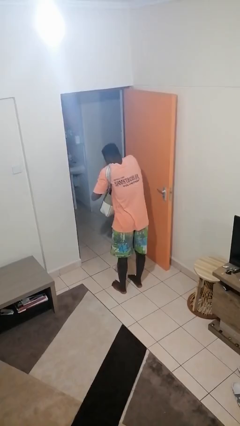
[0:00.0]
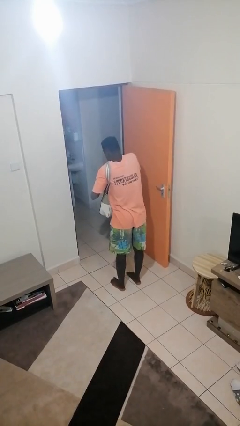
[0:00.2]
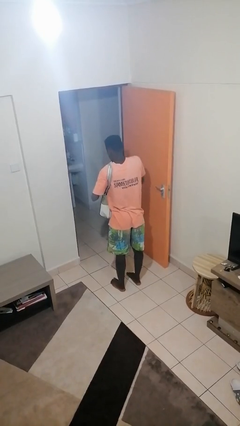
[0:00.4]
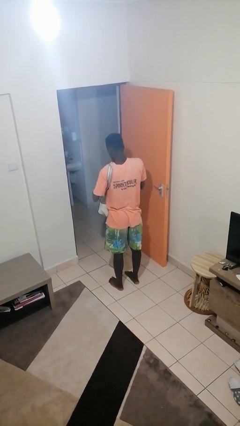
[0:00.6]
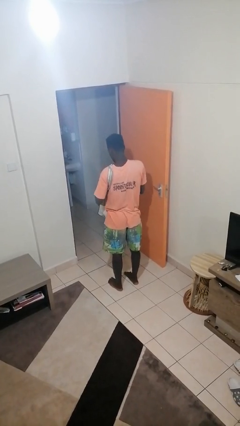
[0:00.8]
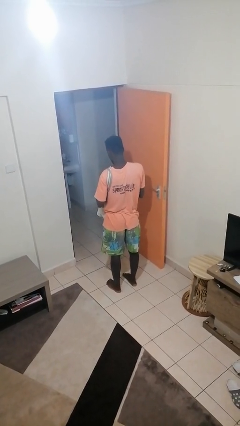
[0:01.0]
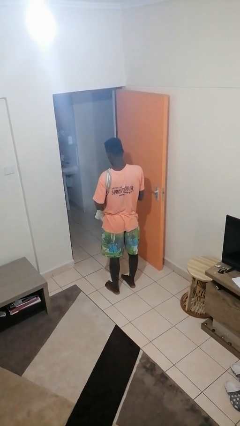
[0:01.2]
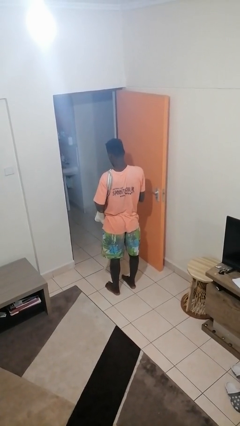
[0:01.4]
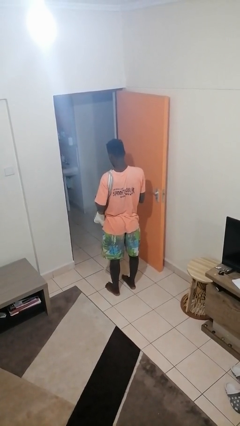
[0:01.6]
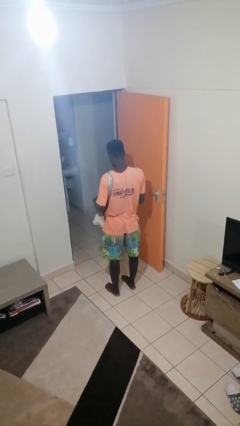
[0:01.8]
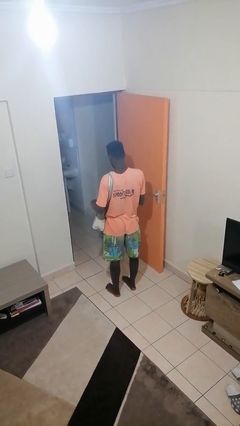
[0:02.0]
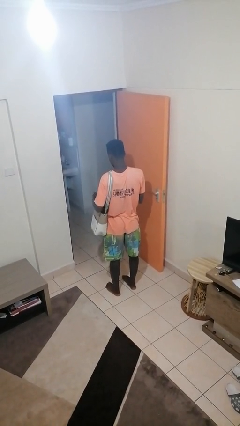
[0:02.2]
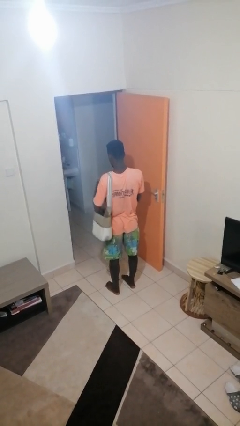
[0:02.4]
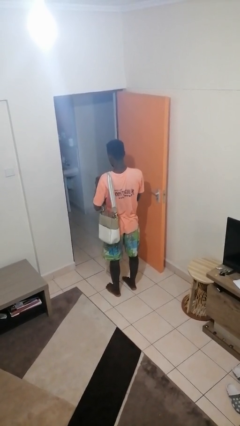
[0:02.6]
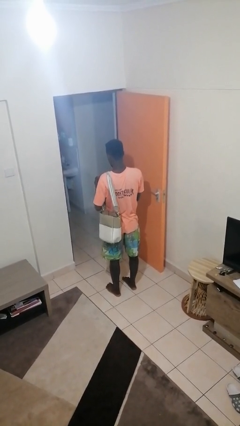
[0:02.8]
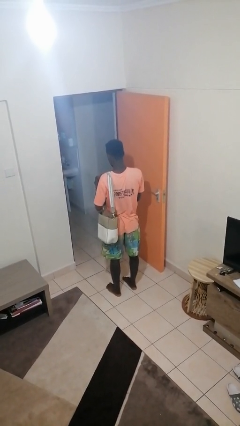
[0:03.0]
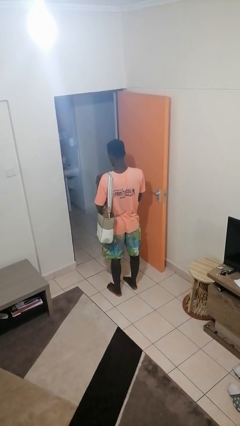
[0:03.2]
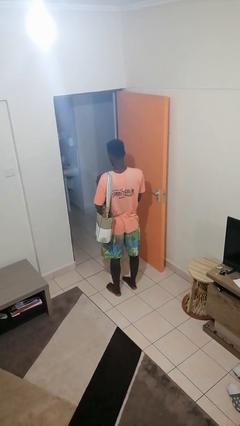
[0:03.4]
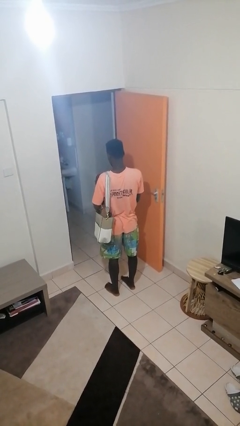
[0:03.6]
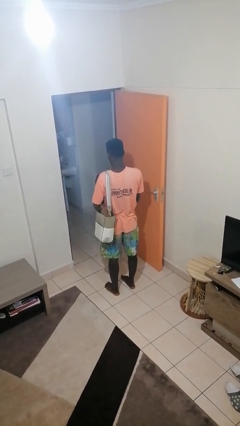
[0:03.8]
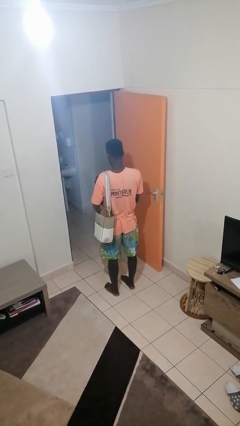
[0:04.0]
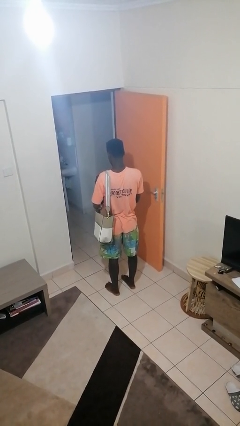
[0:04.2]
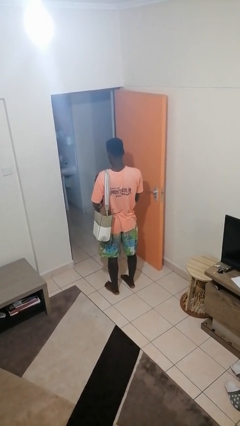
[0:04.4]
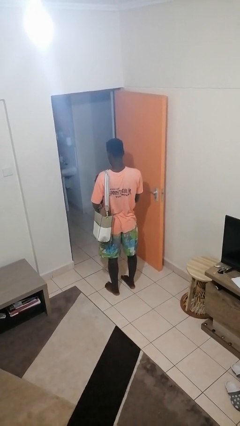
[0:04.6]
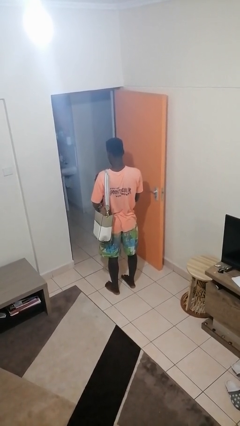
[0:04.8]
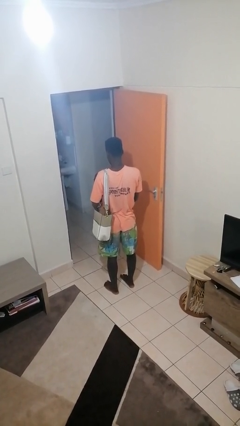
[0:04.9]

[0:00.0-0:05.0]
person takes object from purse

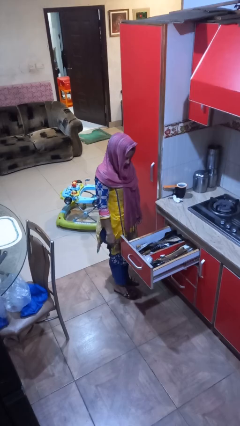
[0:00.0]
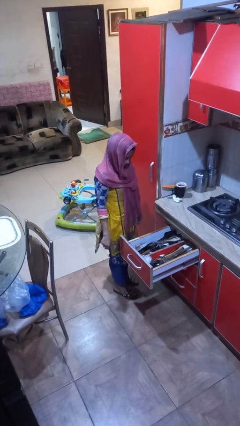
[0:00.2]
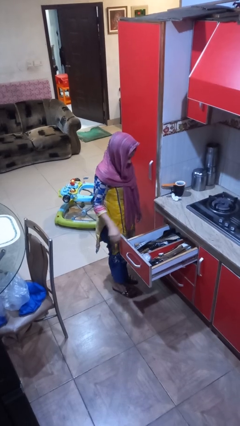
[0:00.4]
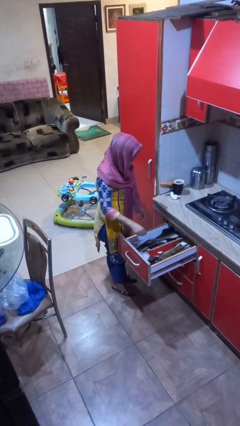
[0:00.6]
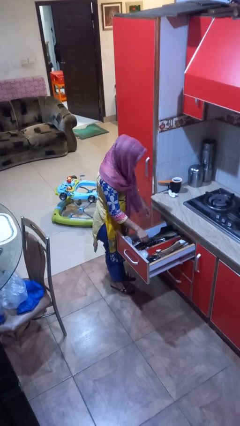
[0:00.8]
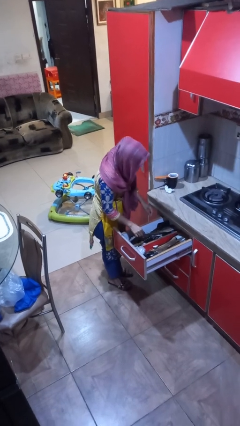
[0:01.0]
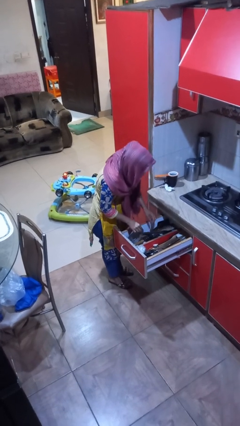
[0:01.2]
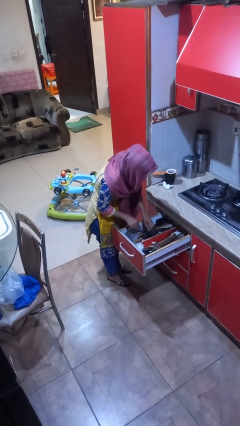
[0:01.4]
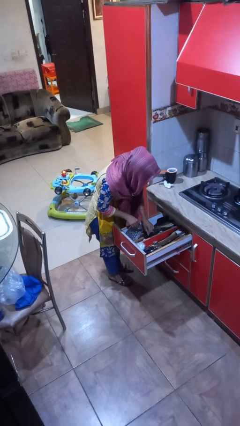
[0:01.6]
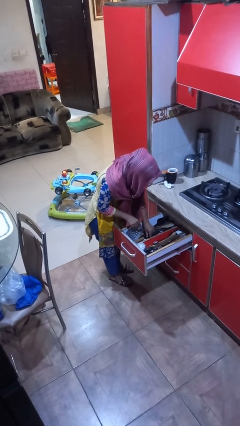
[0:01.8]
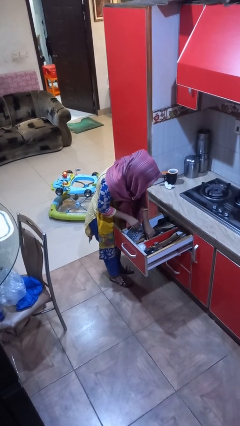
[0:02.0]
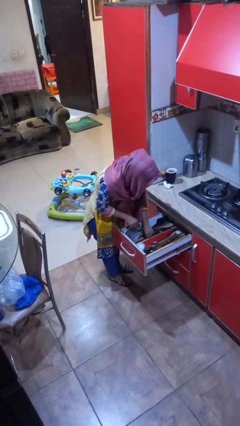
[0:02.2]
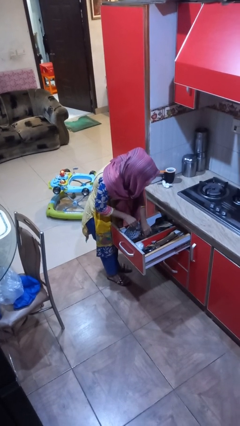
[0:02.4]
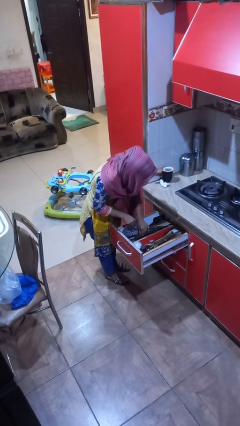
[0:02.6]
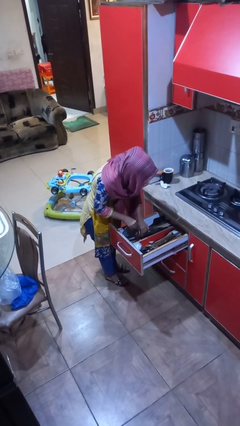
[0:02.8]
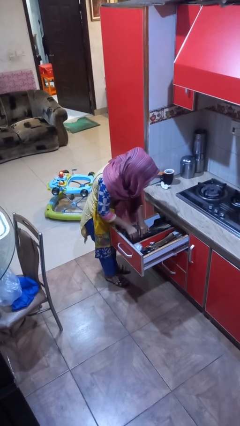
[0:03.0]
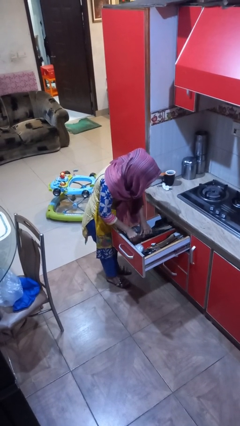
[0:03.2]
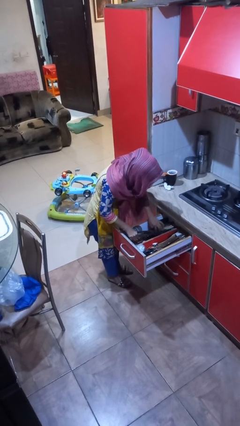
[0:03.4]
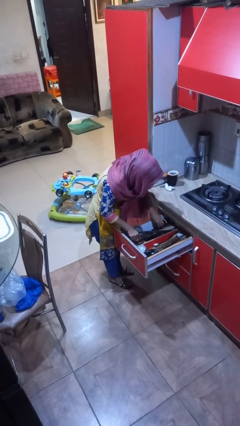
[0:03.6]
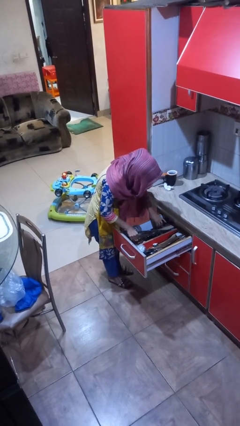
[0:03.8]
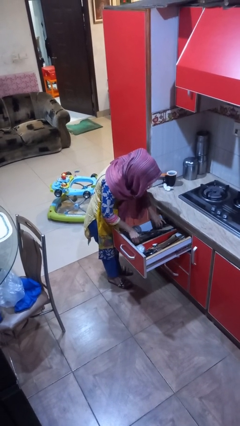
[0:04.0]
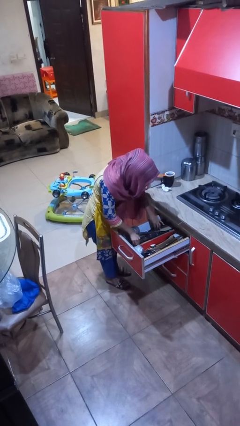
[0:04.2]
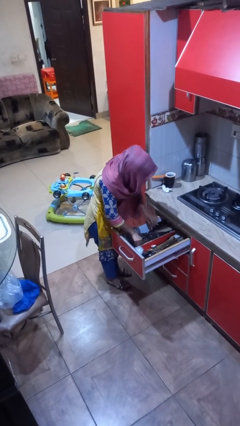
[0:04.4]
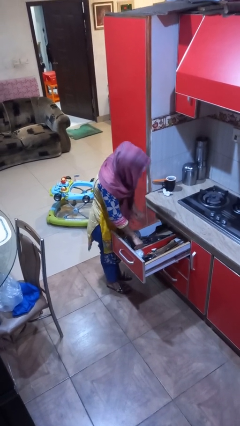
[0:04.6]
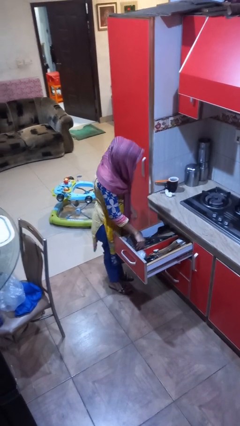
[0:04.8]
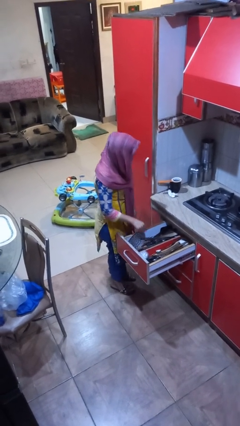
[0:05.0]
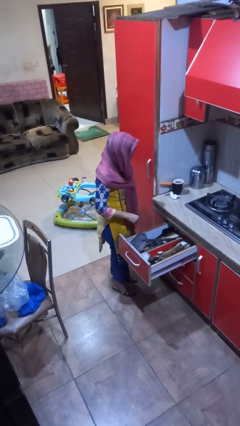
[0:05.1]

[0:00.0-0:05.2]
person searches in kitchen drawer

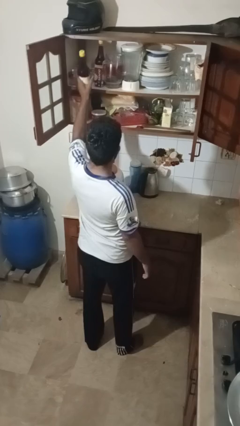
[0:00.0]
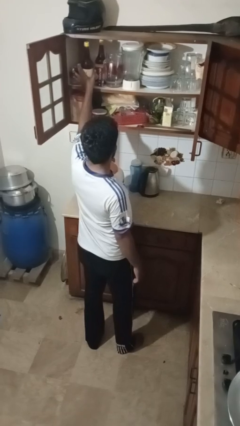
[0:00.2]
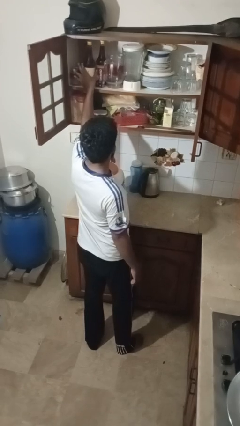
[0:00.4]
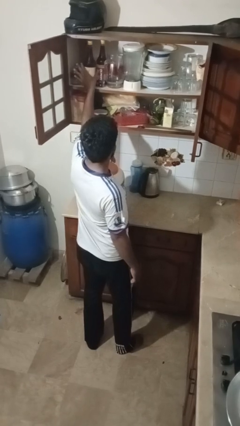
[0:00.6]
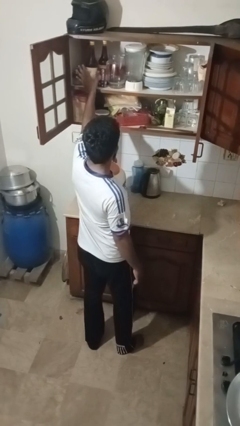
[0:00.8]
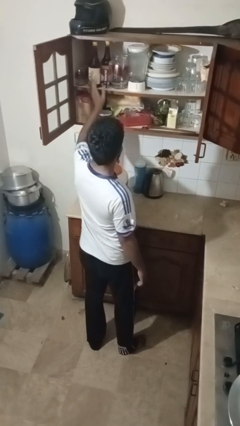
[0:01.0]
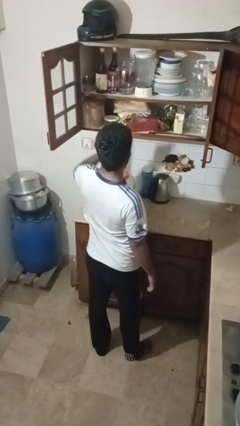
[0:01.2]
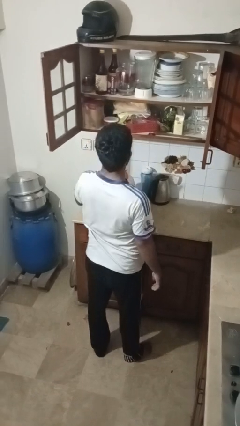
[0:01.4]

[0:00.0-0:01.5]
person puts object in cabinet

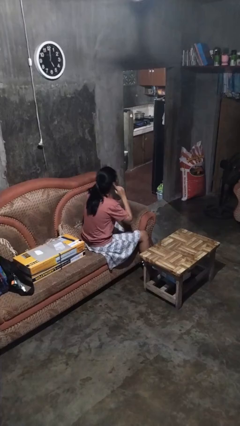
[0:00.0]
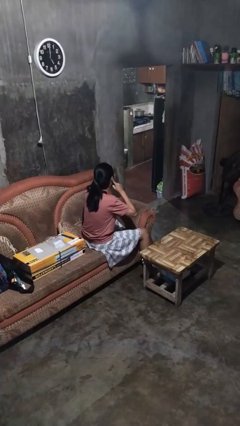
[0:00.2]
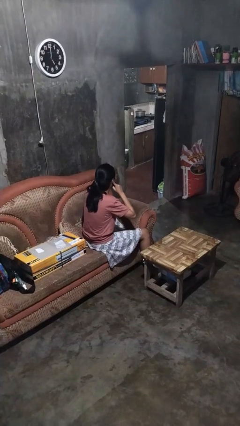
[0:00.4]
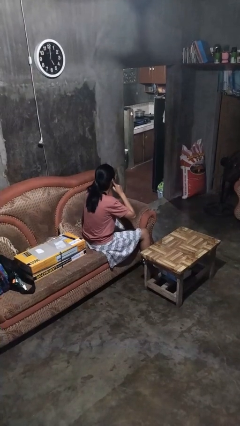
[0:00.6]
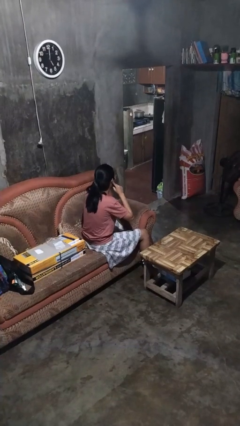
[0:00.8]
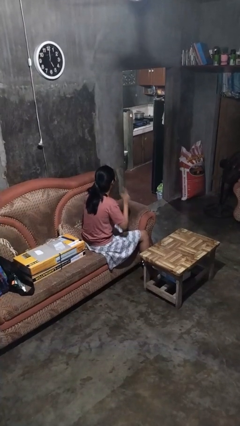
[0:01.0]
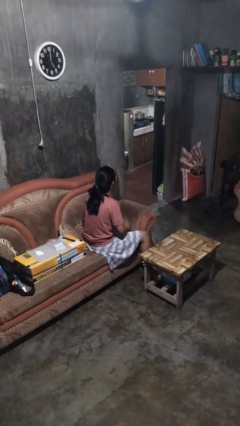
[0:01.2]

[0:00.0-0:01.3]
person puts fingers in ear

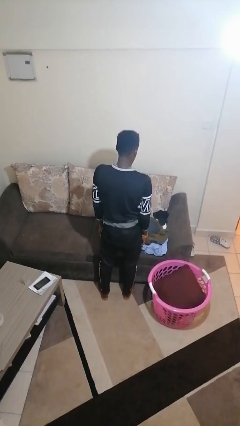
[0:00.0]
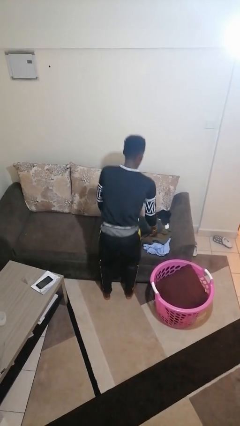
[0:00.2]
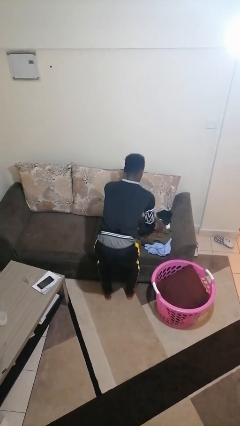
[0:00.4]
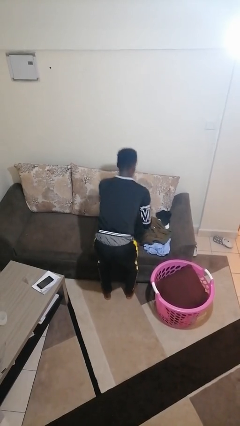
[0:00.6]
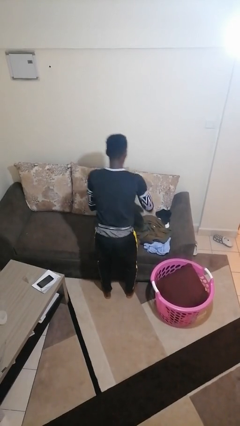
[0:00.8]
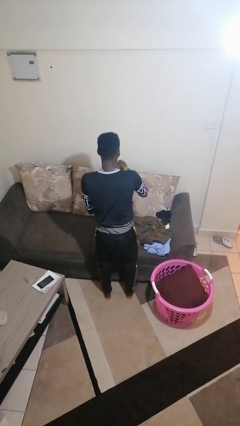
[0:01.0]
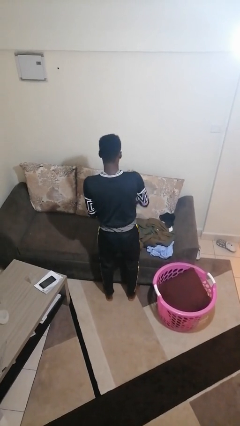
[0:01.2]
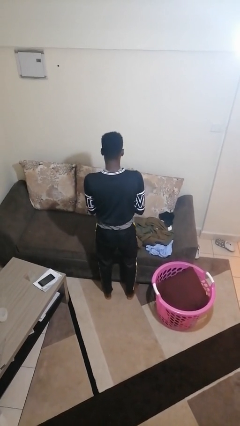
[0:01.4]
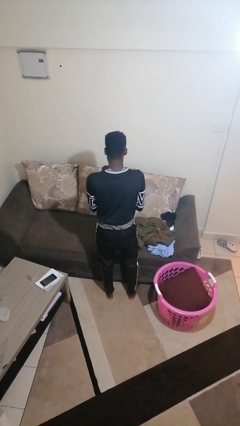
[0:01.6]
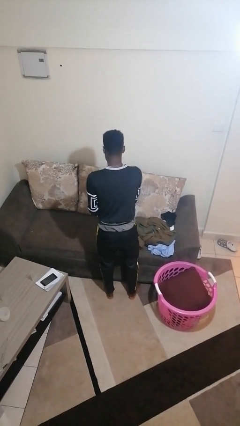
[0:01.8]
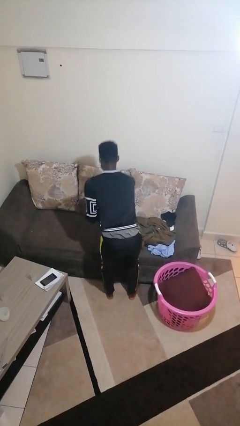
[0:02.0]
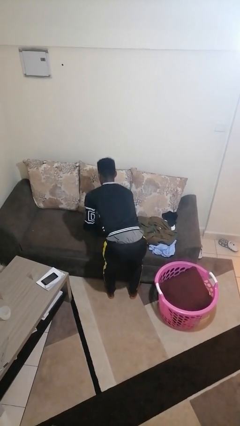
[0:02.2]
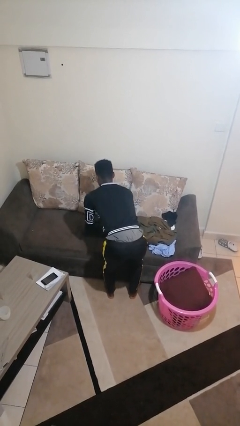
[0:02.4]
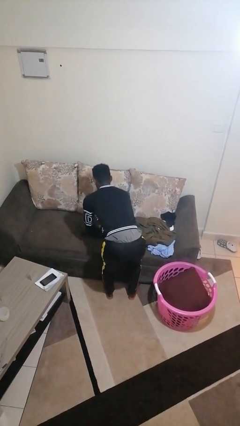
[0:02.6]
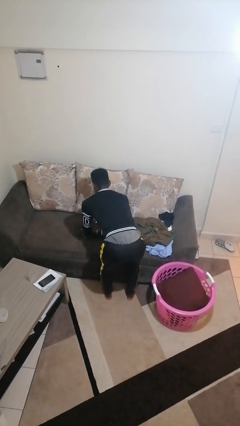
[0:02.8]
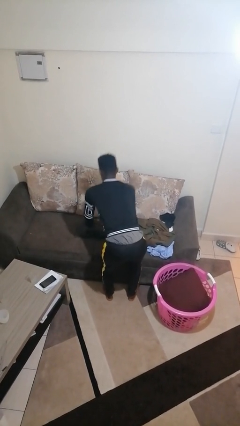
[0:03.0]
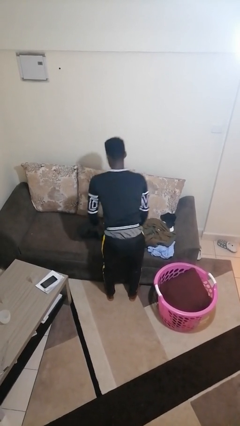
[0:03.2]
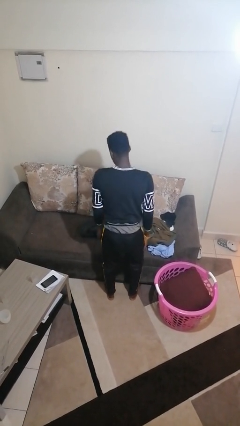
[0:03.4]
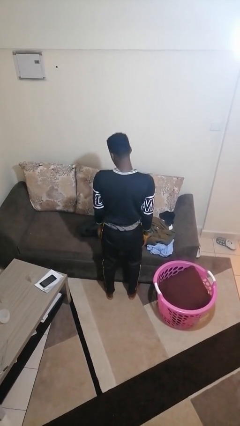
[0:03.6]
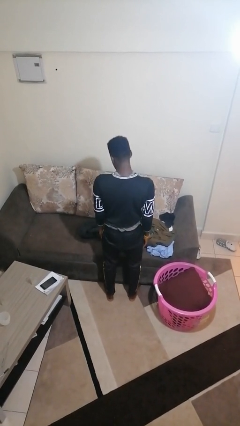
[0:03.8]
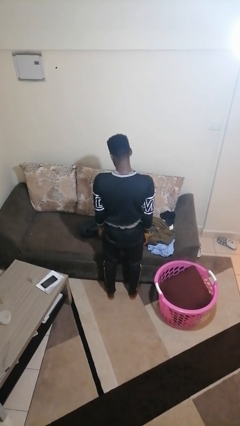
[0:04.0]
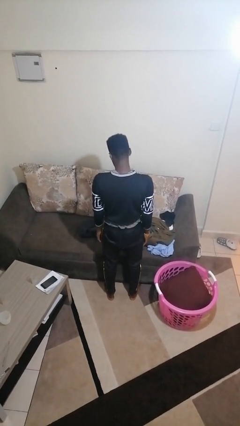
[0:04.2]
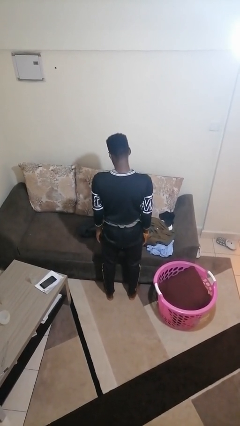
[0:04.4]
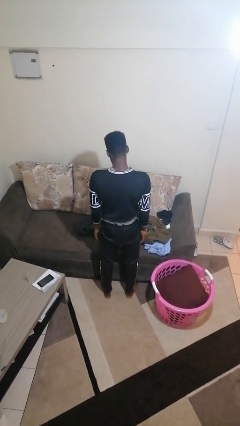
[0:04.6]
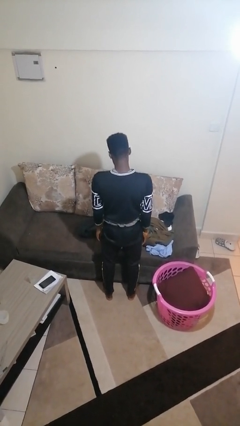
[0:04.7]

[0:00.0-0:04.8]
person folds pants
